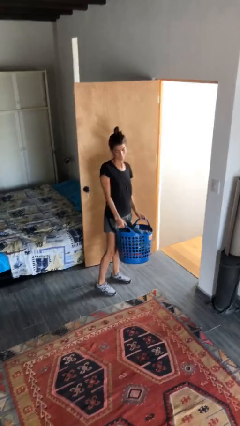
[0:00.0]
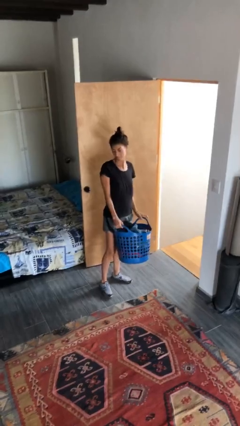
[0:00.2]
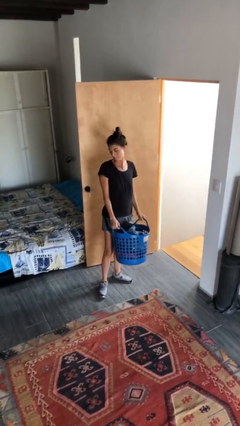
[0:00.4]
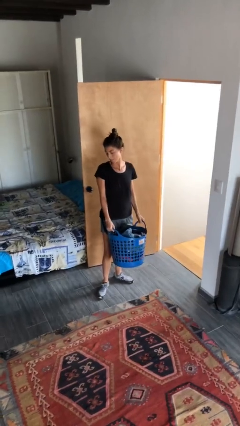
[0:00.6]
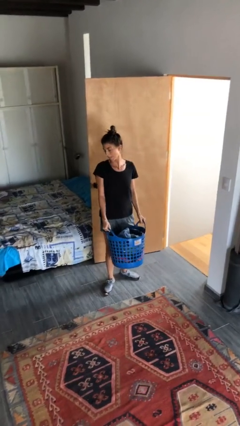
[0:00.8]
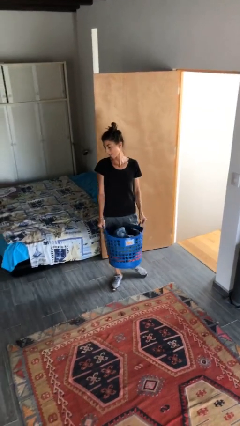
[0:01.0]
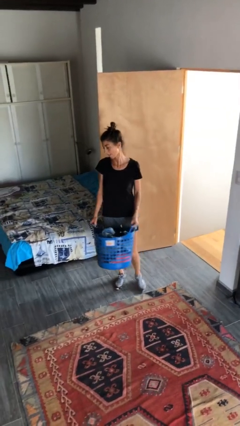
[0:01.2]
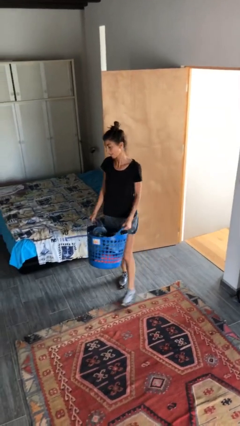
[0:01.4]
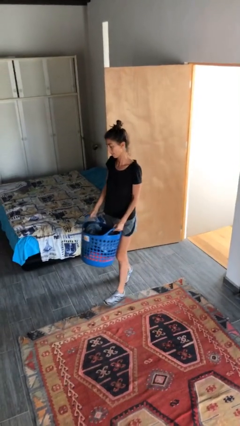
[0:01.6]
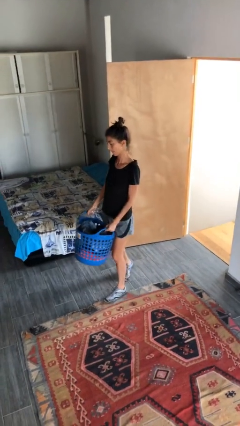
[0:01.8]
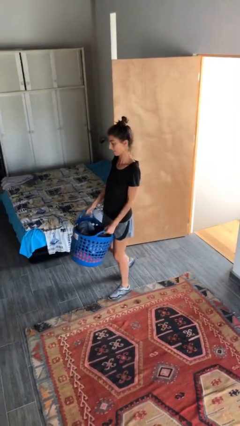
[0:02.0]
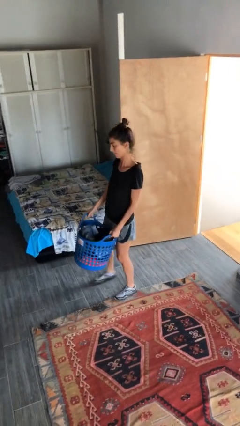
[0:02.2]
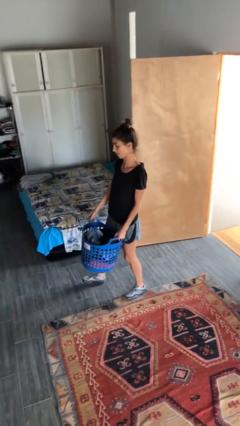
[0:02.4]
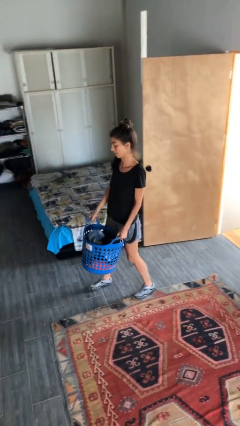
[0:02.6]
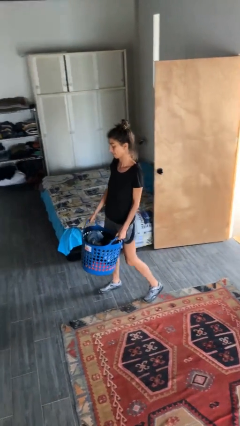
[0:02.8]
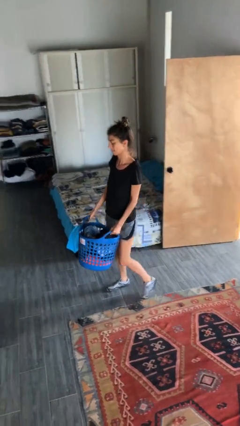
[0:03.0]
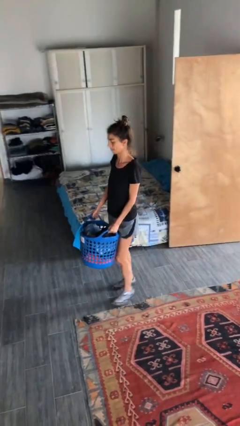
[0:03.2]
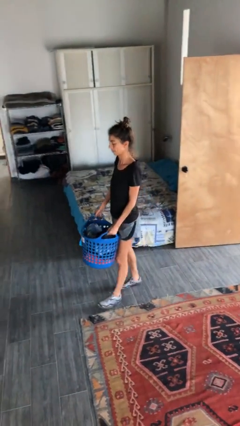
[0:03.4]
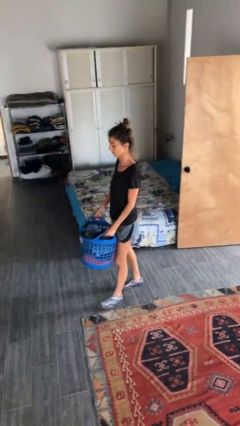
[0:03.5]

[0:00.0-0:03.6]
person carries laundry basket

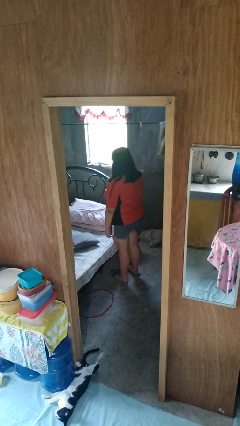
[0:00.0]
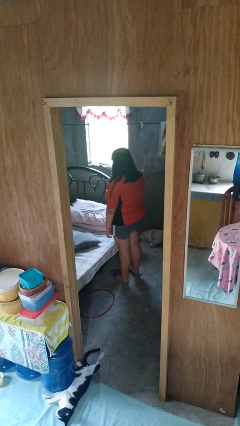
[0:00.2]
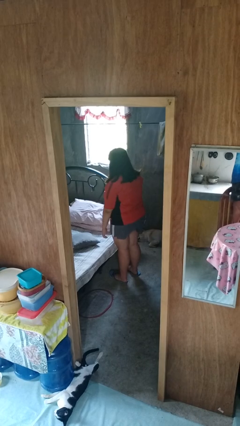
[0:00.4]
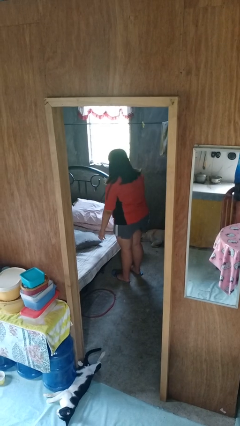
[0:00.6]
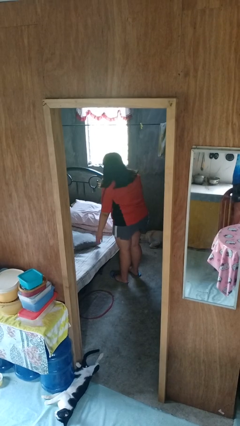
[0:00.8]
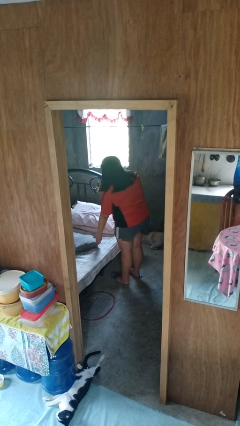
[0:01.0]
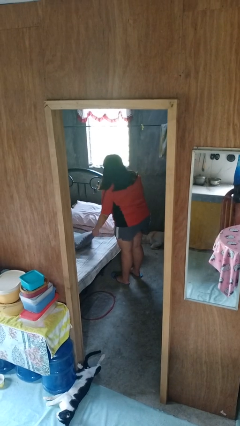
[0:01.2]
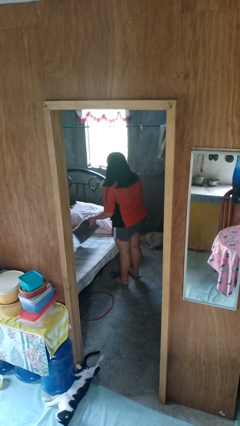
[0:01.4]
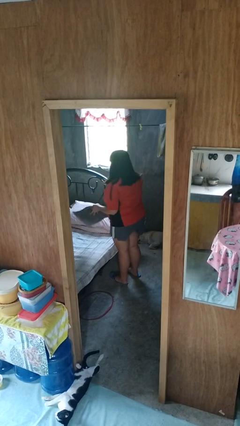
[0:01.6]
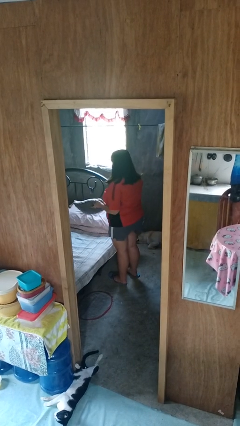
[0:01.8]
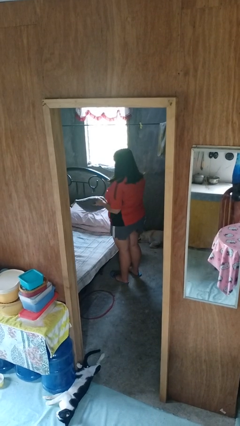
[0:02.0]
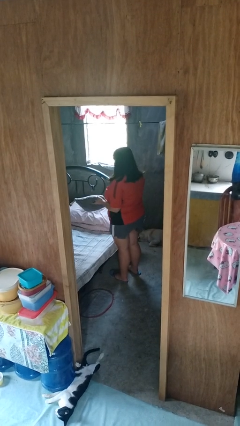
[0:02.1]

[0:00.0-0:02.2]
person picks up object from bed

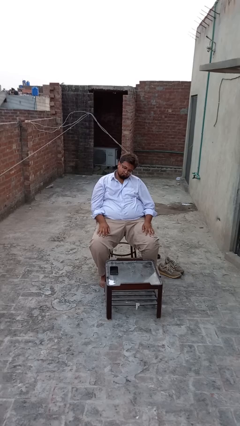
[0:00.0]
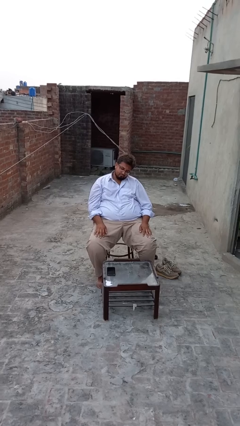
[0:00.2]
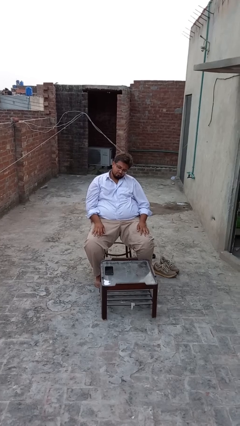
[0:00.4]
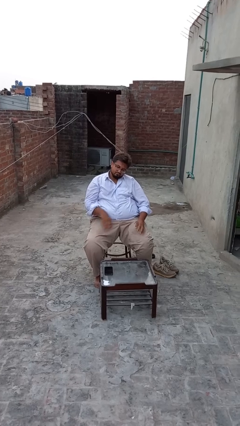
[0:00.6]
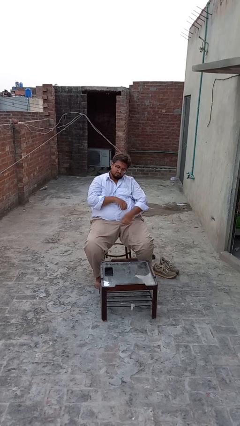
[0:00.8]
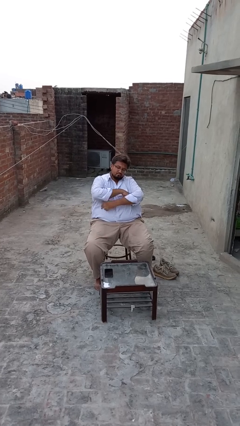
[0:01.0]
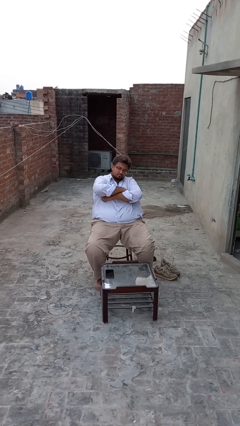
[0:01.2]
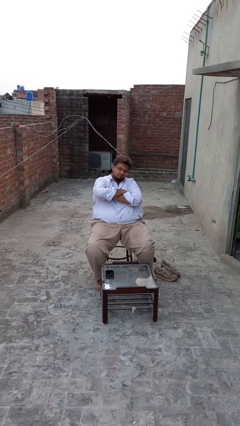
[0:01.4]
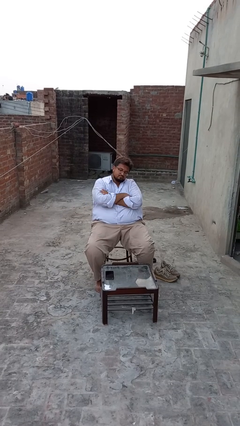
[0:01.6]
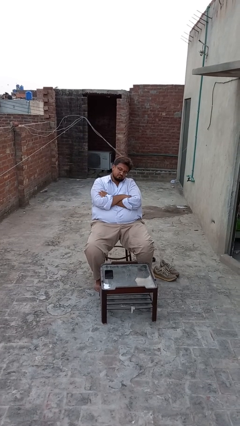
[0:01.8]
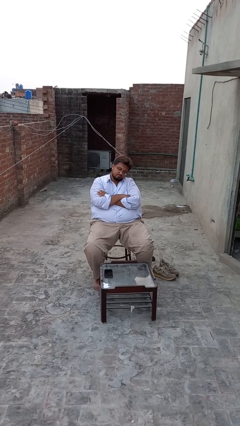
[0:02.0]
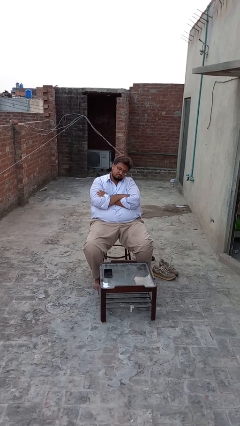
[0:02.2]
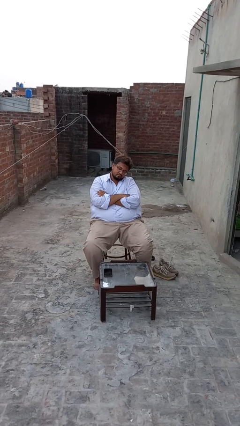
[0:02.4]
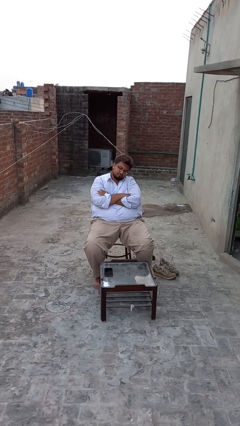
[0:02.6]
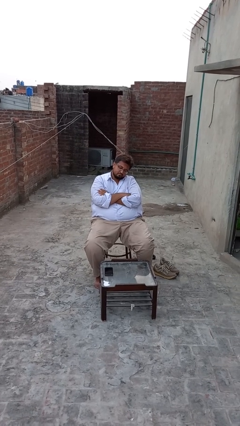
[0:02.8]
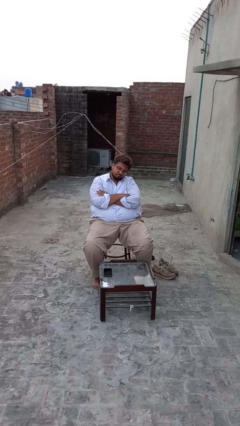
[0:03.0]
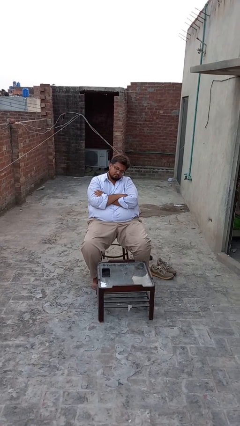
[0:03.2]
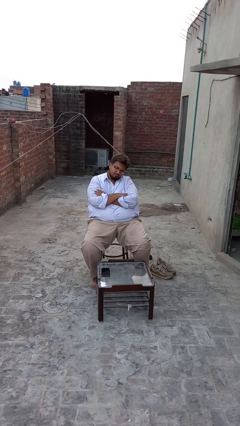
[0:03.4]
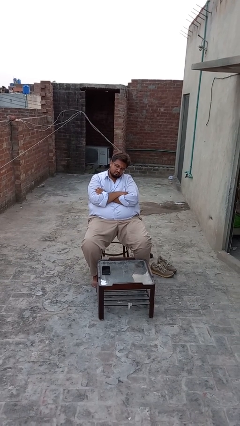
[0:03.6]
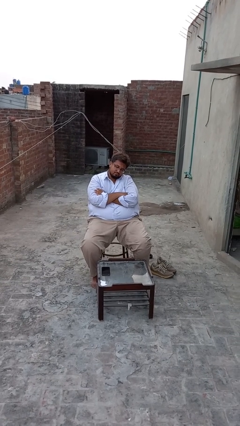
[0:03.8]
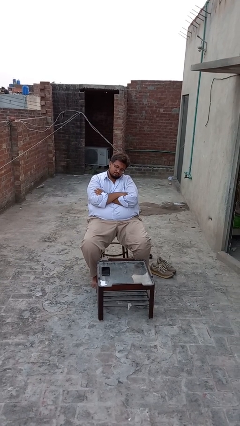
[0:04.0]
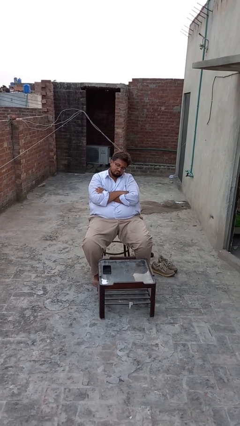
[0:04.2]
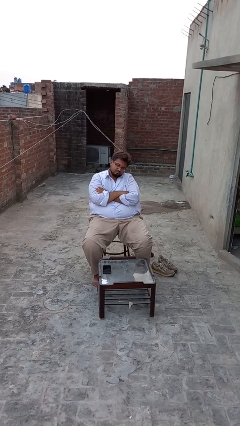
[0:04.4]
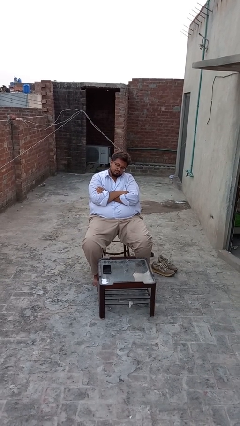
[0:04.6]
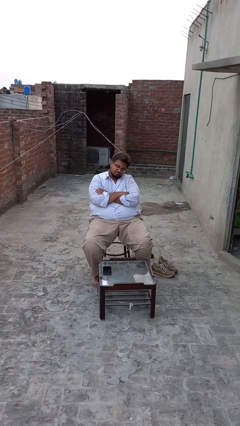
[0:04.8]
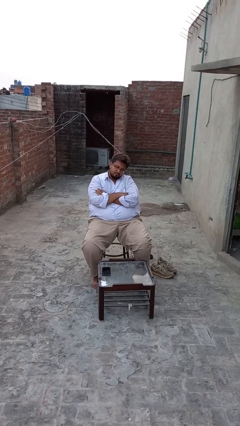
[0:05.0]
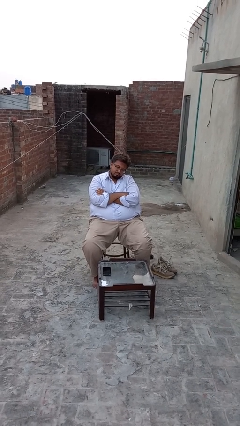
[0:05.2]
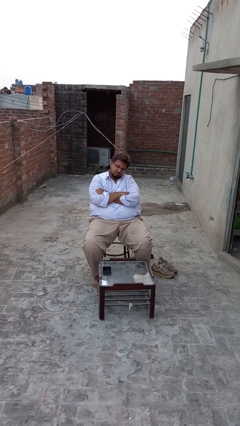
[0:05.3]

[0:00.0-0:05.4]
person crosses arms

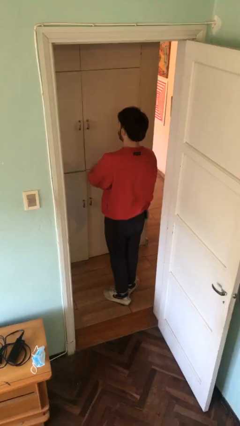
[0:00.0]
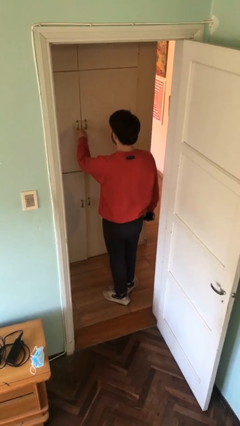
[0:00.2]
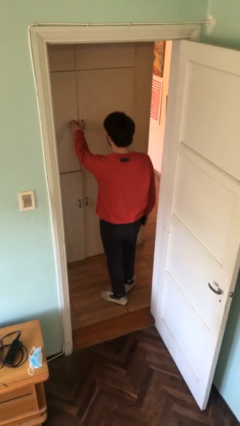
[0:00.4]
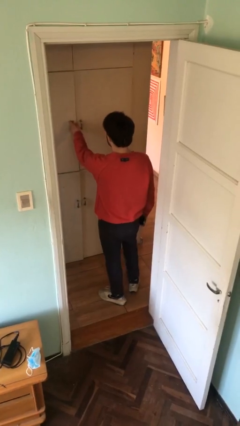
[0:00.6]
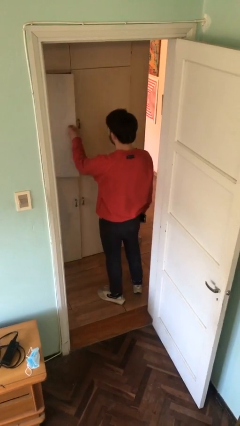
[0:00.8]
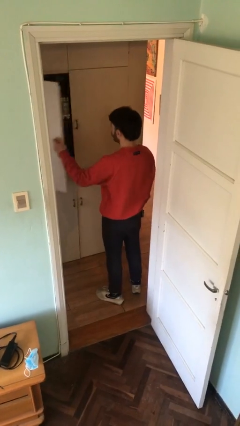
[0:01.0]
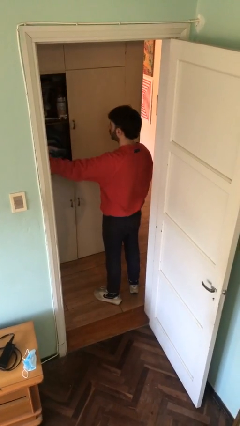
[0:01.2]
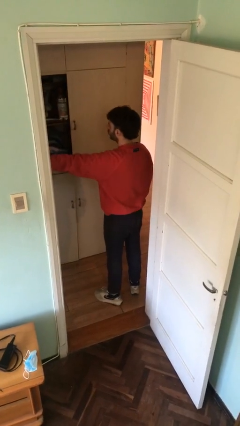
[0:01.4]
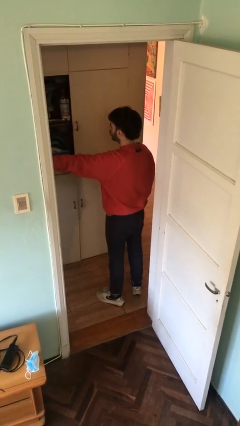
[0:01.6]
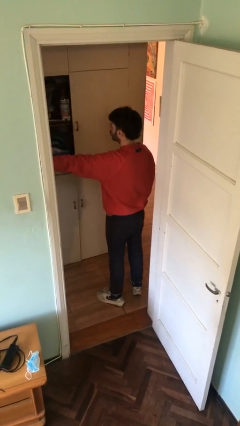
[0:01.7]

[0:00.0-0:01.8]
person opens closet door

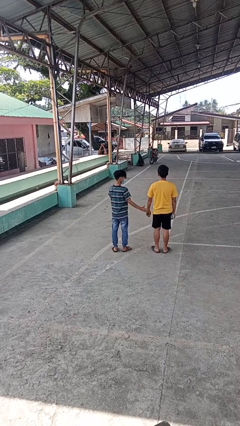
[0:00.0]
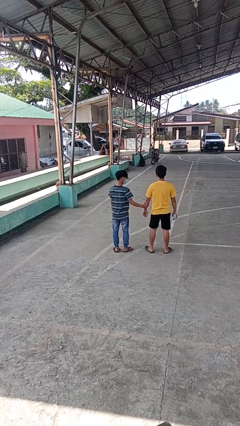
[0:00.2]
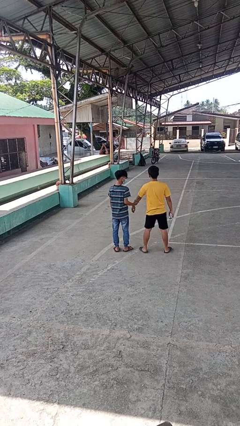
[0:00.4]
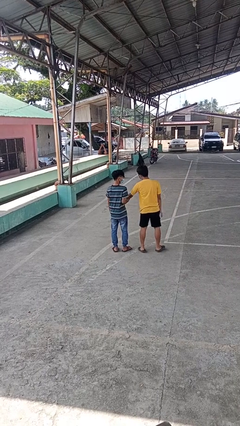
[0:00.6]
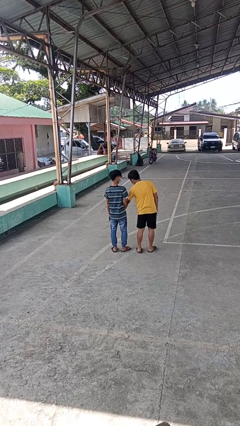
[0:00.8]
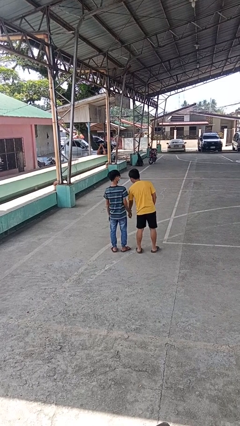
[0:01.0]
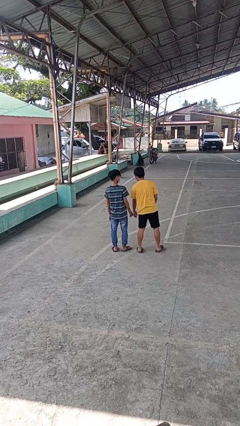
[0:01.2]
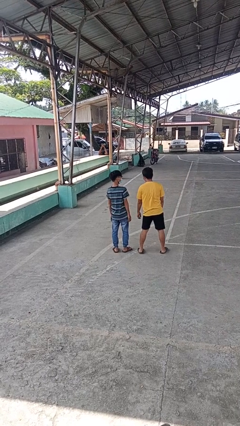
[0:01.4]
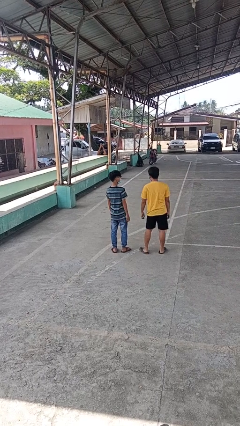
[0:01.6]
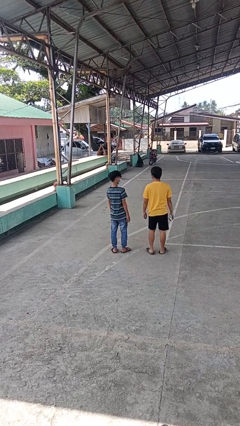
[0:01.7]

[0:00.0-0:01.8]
person grabs person by forearm

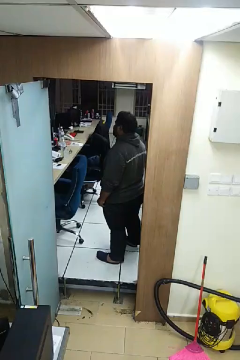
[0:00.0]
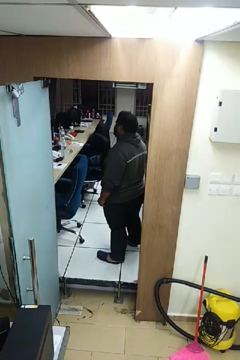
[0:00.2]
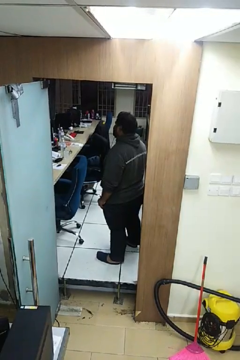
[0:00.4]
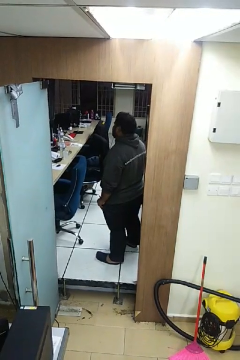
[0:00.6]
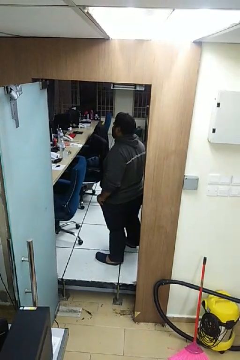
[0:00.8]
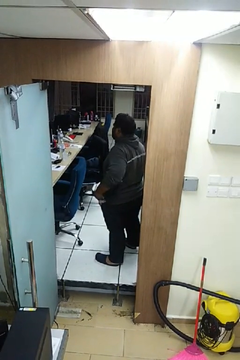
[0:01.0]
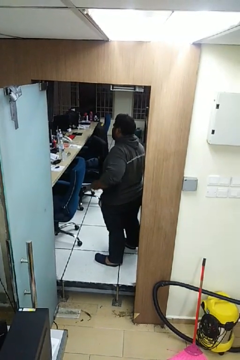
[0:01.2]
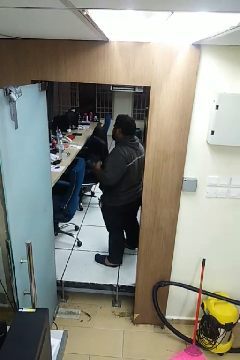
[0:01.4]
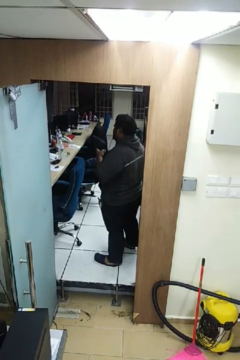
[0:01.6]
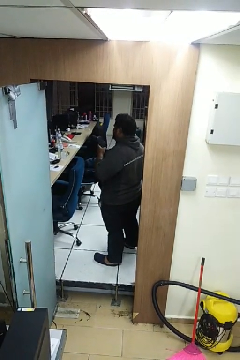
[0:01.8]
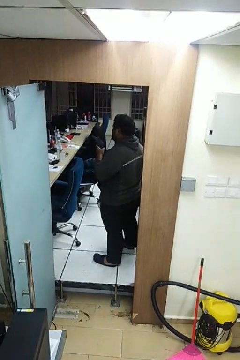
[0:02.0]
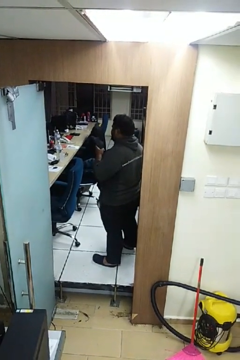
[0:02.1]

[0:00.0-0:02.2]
person takes phone from pocket

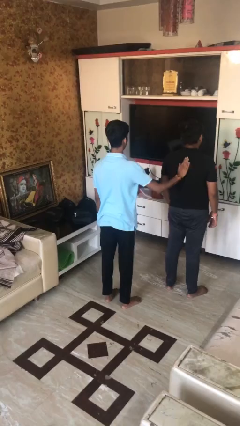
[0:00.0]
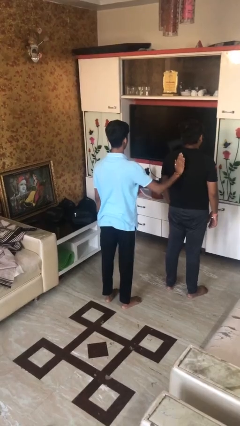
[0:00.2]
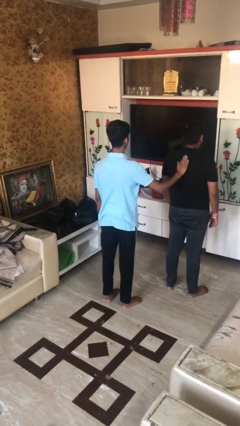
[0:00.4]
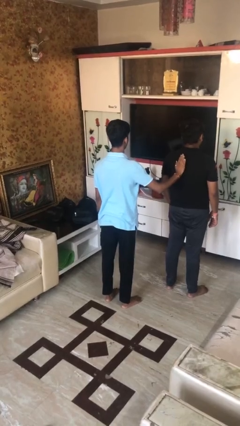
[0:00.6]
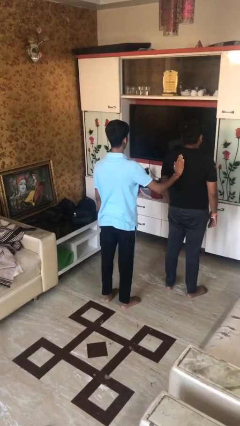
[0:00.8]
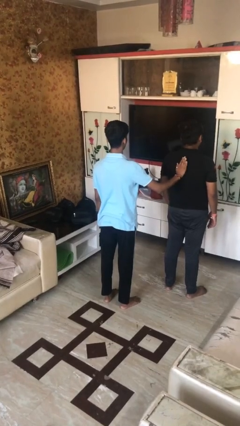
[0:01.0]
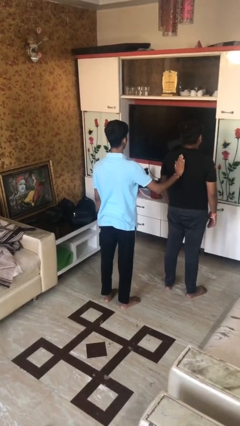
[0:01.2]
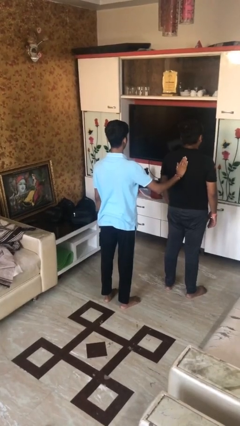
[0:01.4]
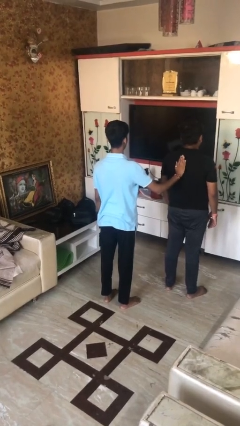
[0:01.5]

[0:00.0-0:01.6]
person touches back of person
